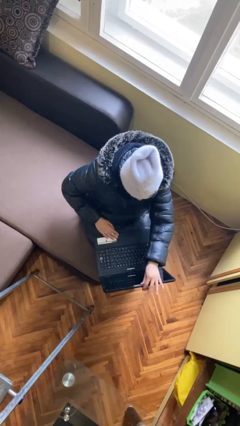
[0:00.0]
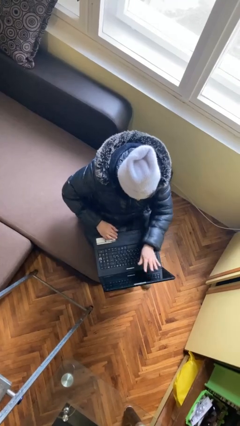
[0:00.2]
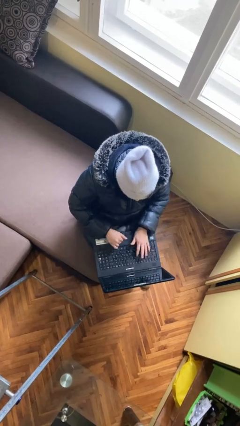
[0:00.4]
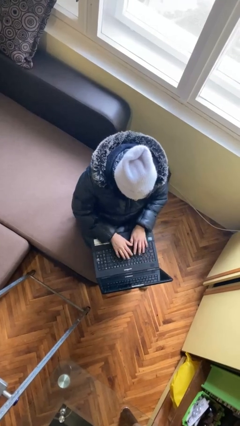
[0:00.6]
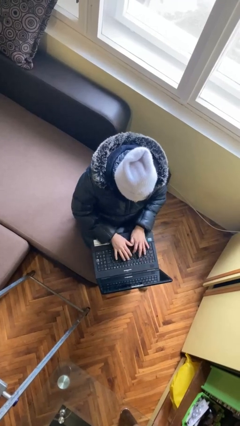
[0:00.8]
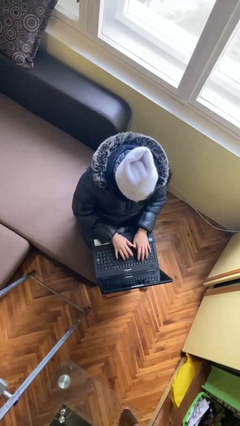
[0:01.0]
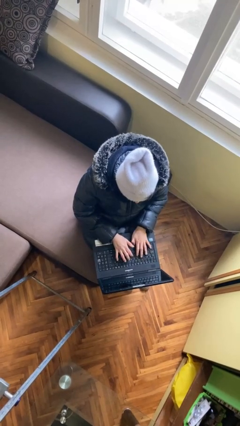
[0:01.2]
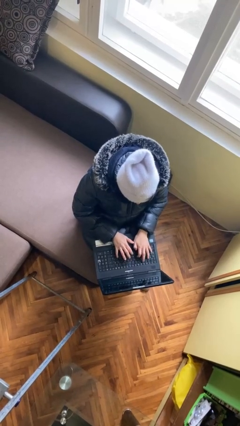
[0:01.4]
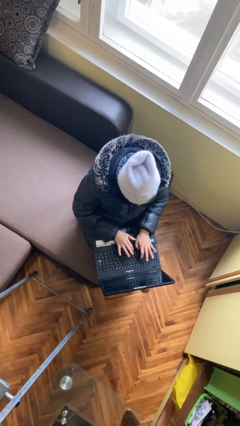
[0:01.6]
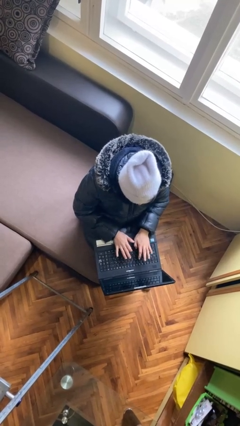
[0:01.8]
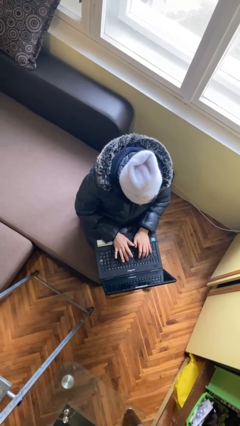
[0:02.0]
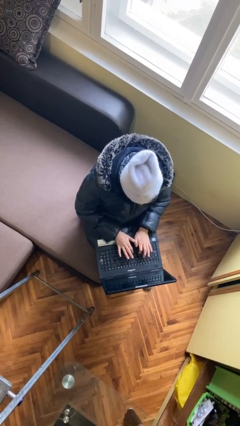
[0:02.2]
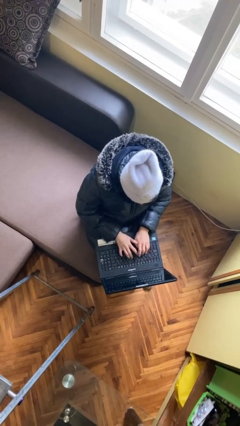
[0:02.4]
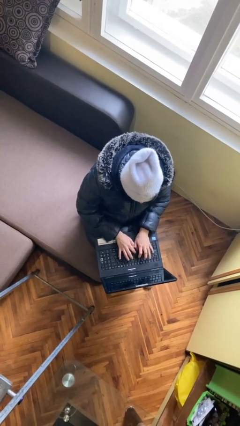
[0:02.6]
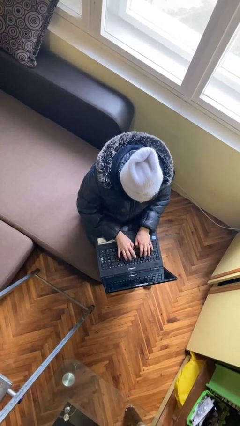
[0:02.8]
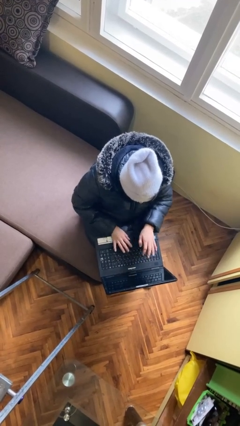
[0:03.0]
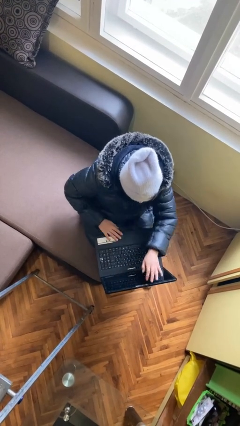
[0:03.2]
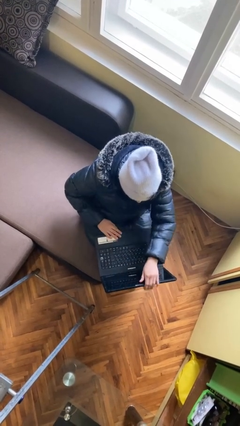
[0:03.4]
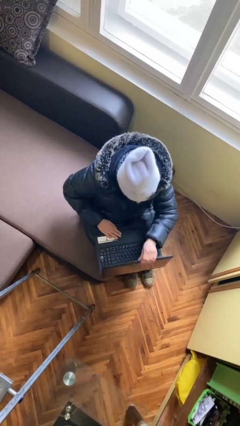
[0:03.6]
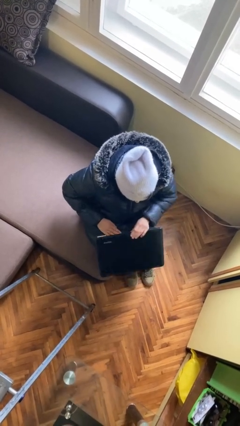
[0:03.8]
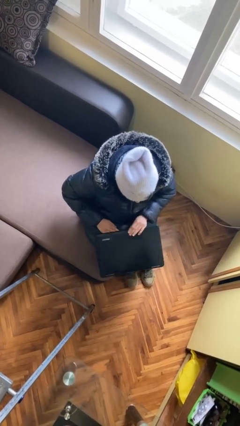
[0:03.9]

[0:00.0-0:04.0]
person interacts with laptop

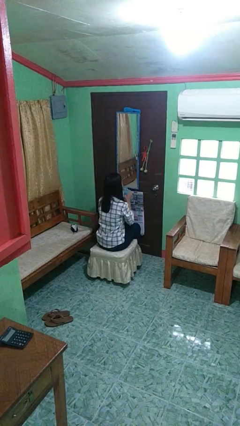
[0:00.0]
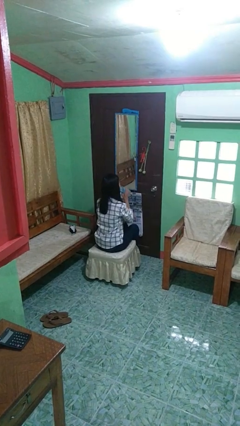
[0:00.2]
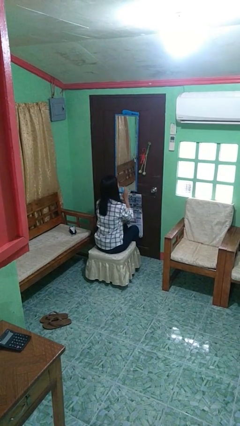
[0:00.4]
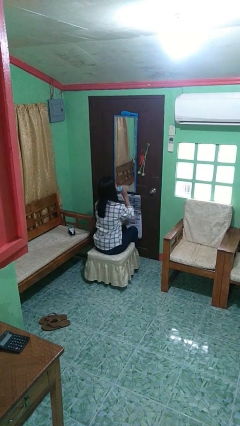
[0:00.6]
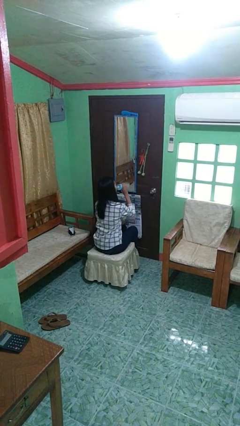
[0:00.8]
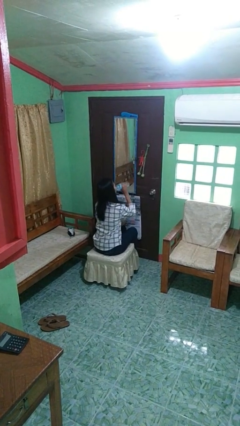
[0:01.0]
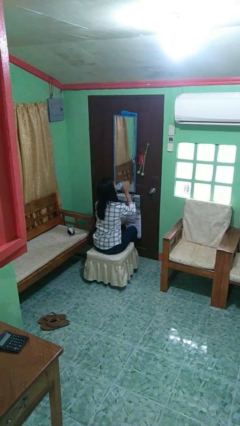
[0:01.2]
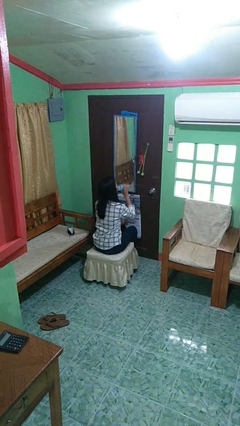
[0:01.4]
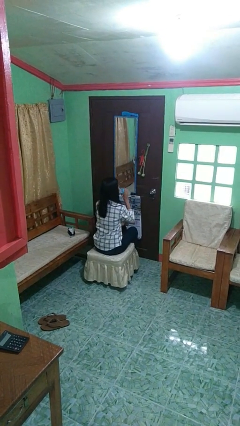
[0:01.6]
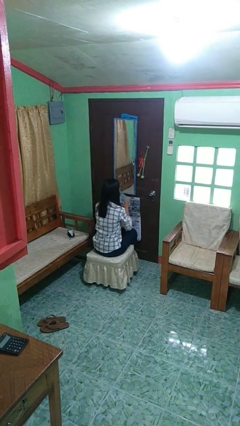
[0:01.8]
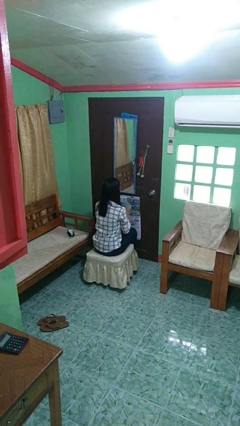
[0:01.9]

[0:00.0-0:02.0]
person drinks from bottle

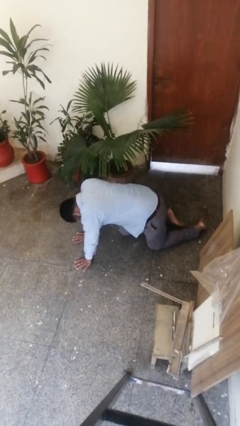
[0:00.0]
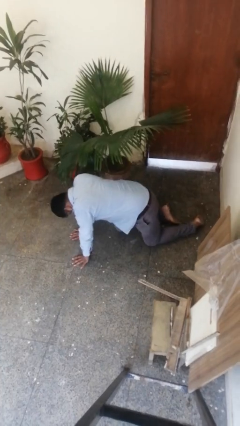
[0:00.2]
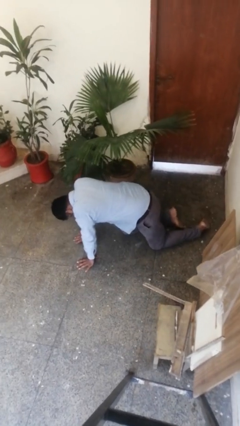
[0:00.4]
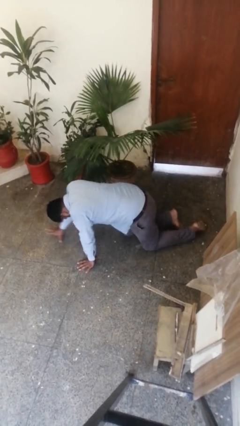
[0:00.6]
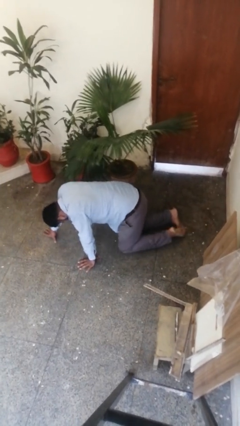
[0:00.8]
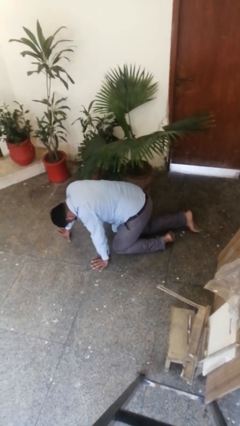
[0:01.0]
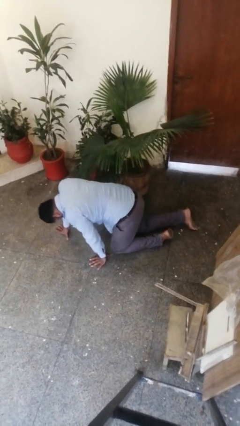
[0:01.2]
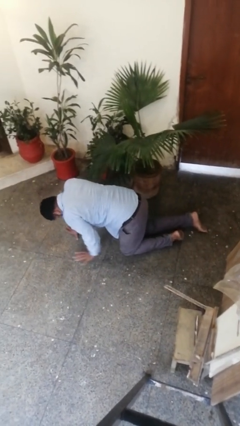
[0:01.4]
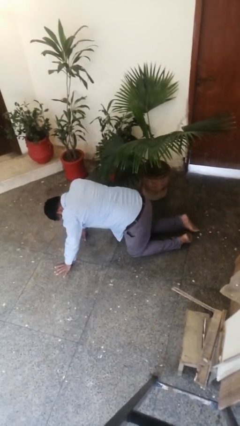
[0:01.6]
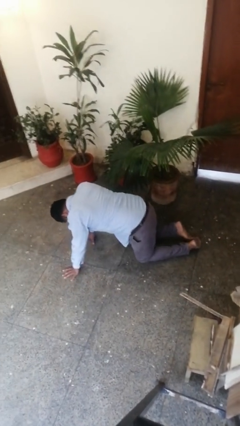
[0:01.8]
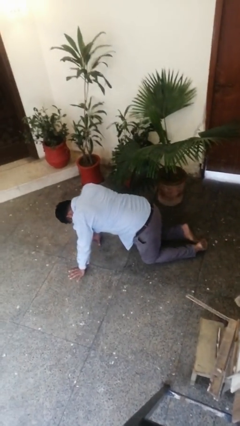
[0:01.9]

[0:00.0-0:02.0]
person crawls

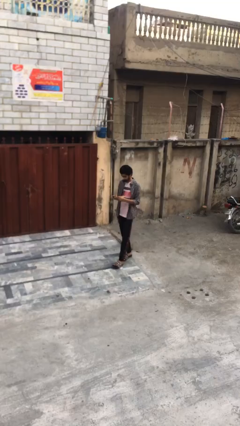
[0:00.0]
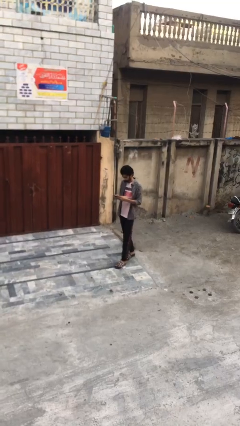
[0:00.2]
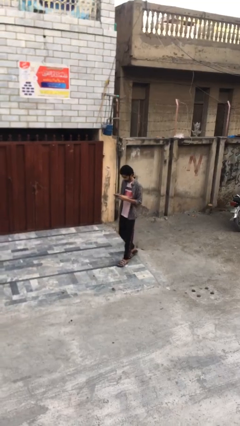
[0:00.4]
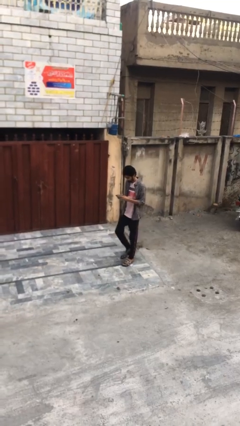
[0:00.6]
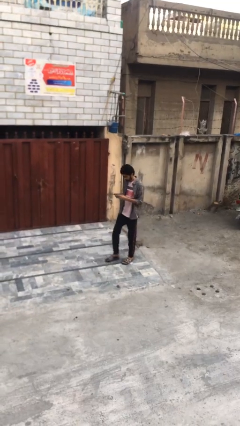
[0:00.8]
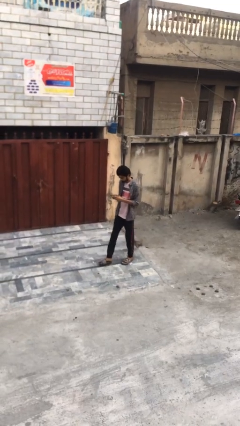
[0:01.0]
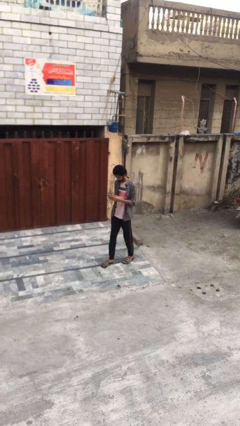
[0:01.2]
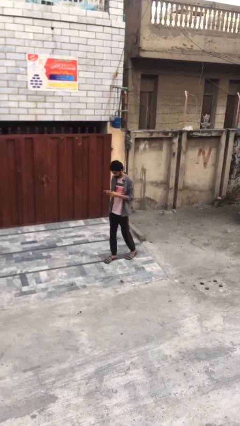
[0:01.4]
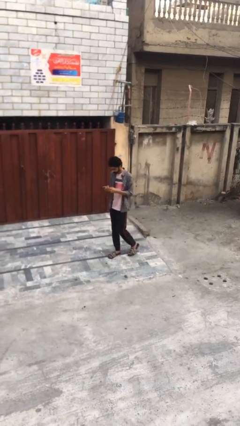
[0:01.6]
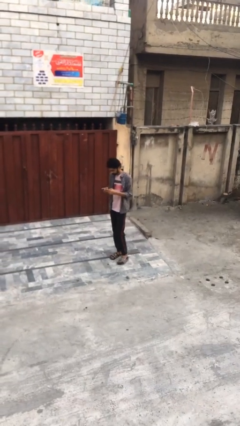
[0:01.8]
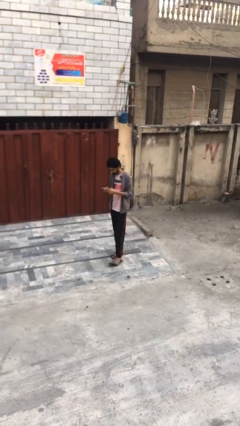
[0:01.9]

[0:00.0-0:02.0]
person texts on phone

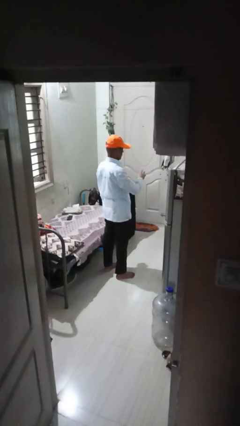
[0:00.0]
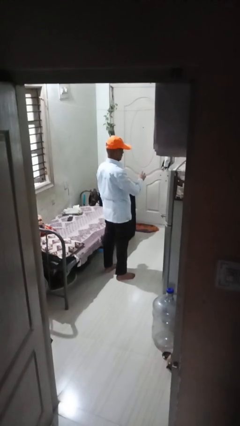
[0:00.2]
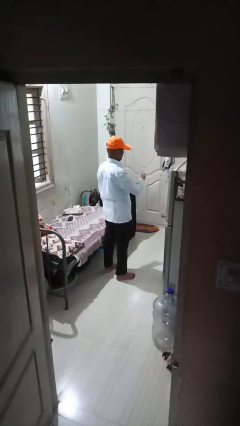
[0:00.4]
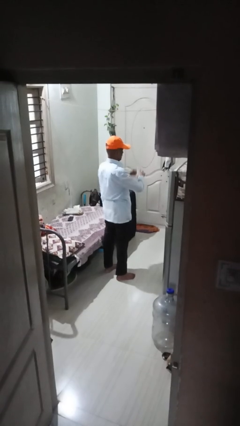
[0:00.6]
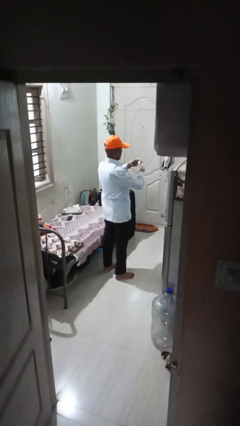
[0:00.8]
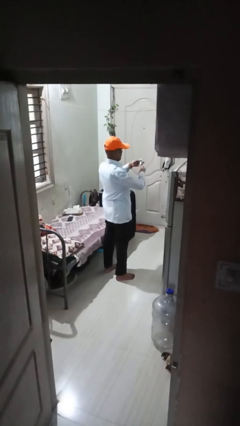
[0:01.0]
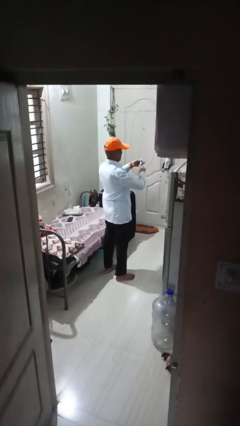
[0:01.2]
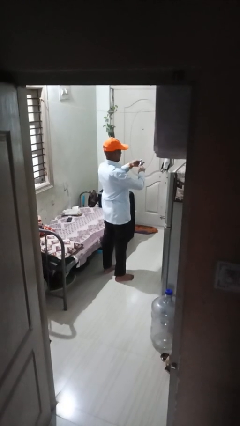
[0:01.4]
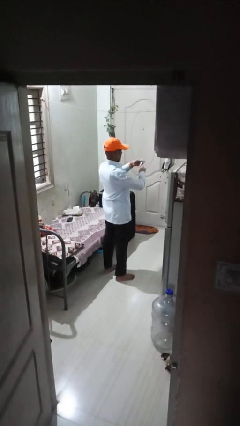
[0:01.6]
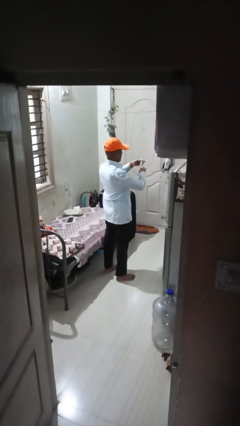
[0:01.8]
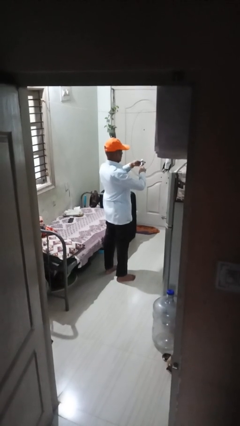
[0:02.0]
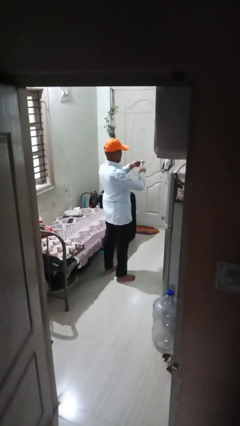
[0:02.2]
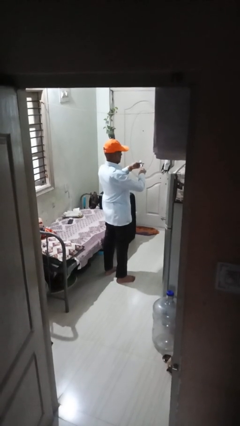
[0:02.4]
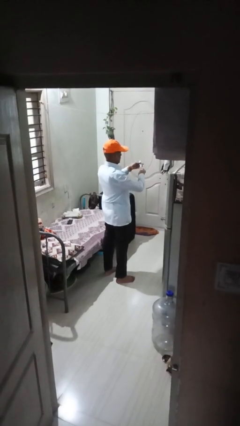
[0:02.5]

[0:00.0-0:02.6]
person clips fingernails

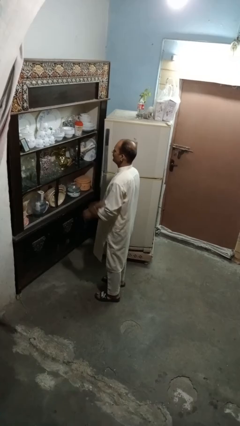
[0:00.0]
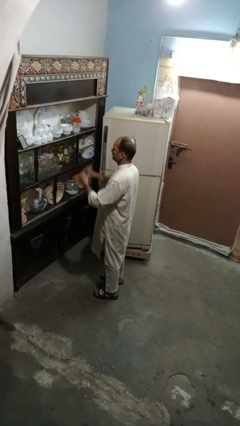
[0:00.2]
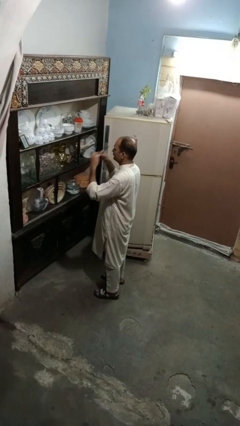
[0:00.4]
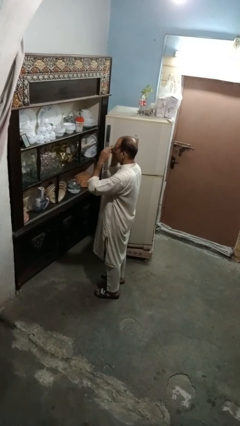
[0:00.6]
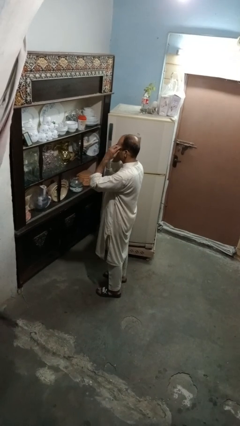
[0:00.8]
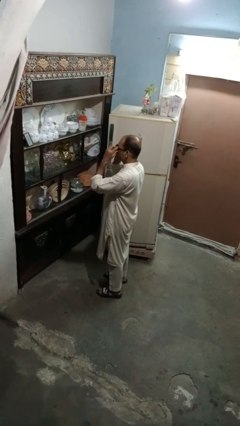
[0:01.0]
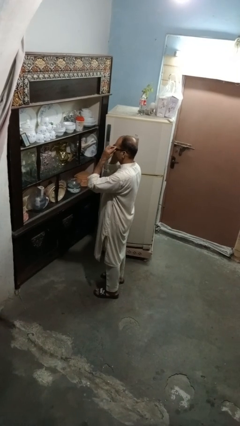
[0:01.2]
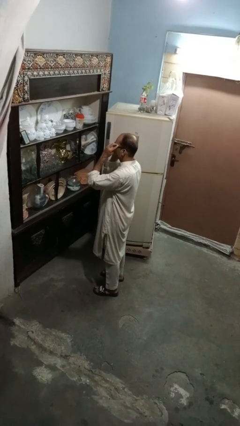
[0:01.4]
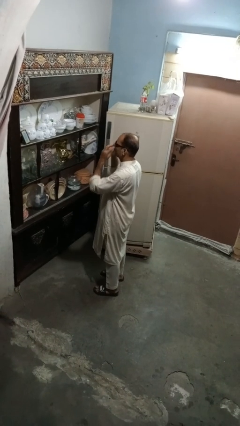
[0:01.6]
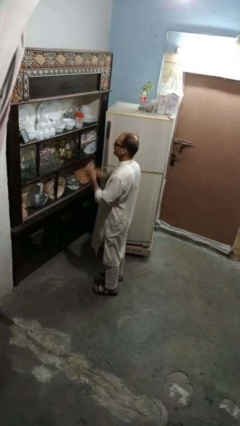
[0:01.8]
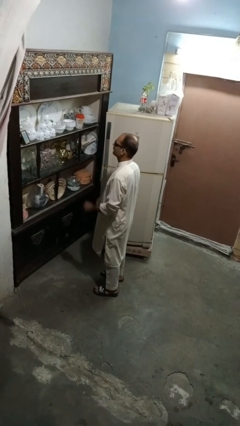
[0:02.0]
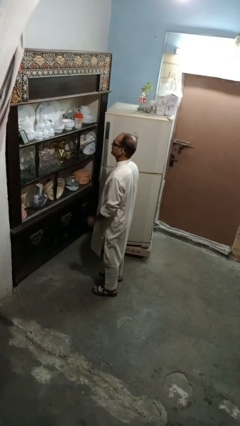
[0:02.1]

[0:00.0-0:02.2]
person puts on sunglasses

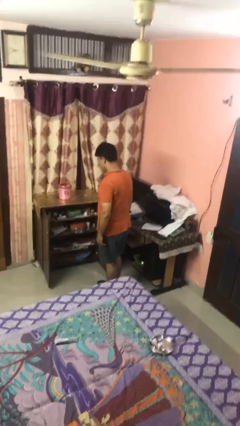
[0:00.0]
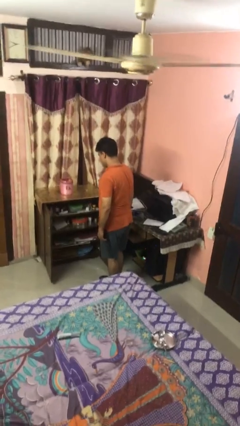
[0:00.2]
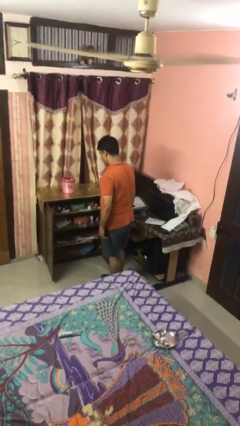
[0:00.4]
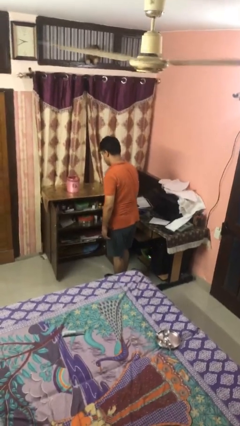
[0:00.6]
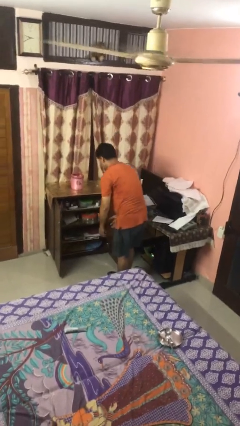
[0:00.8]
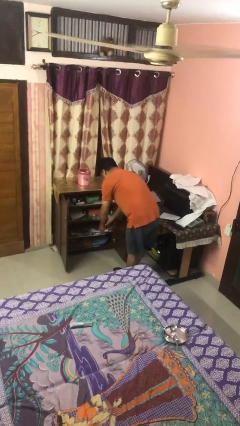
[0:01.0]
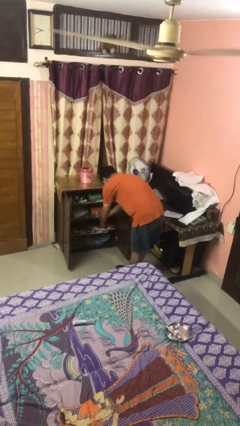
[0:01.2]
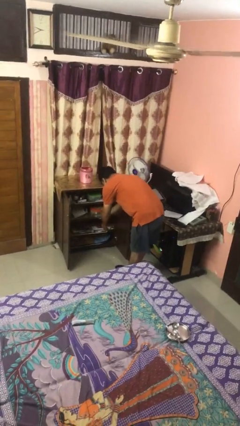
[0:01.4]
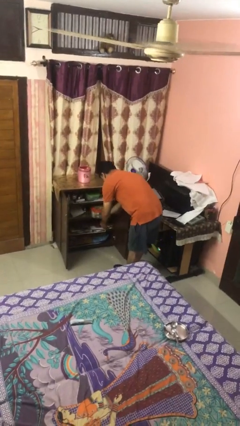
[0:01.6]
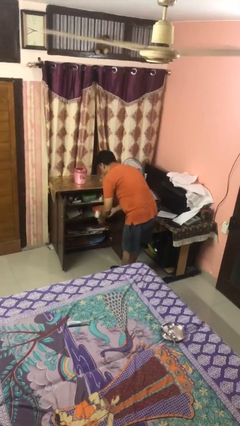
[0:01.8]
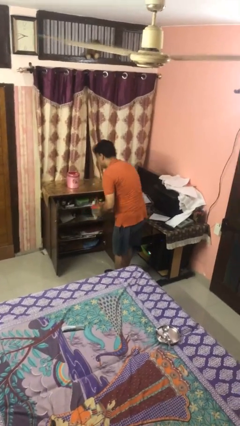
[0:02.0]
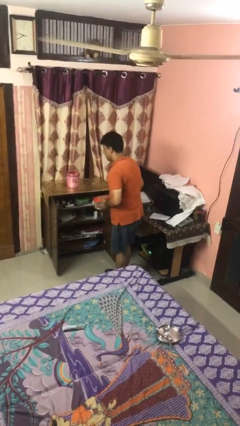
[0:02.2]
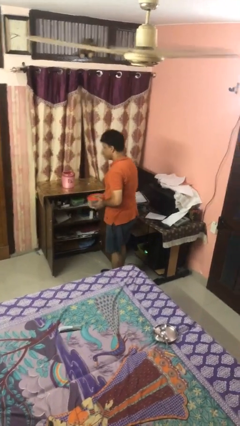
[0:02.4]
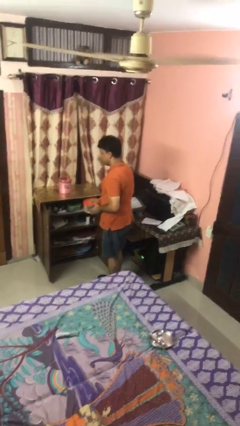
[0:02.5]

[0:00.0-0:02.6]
person picks up object from cabinet
